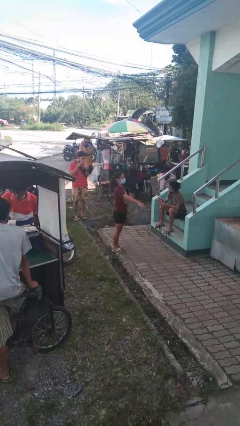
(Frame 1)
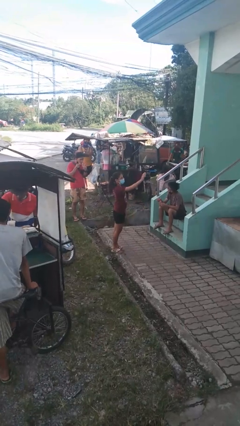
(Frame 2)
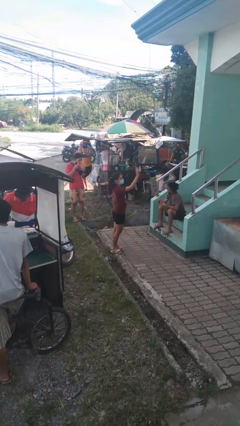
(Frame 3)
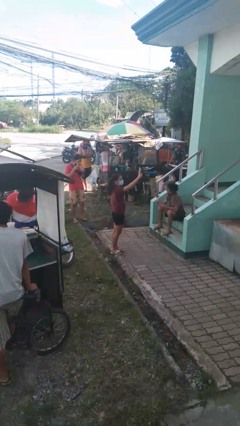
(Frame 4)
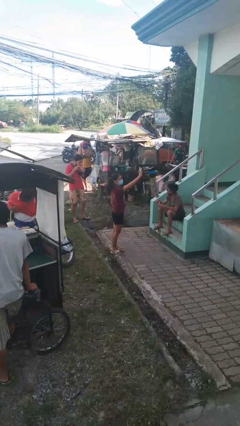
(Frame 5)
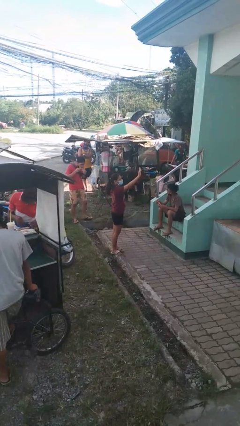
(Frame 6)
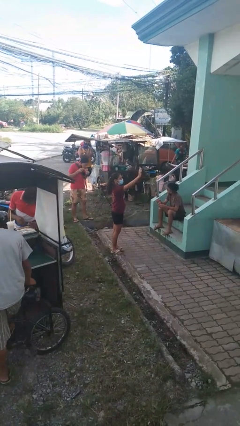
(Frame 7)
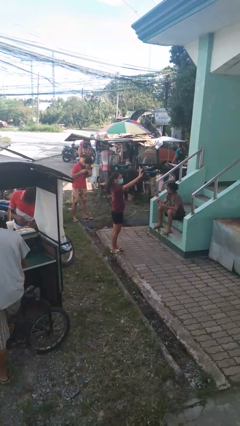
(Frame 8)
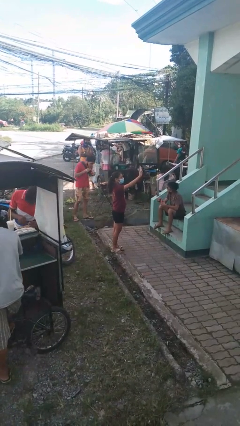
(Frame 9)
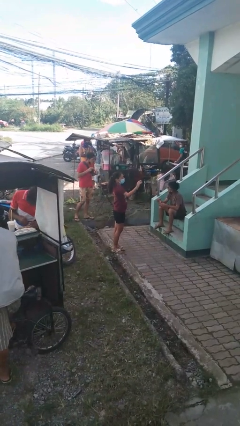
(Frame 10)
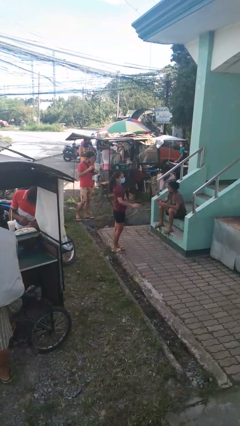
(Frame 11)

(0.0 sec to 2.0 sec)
person waves at person

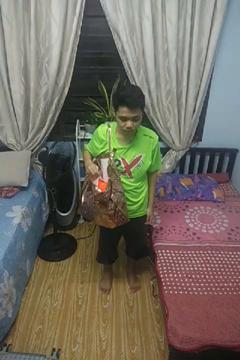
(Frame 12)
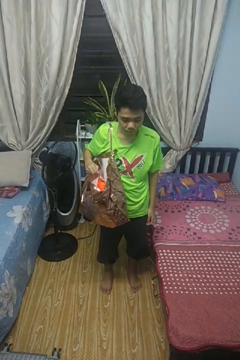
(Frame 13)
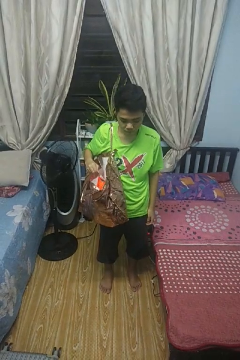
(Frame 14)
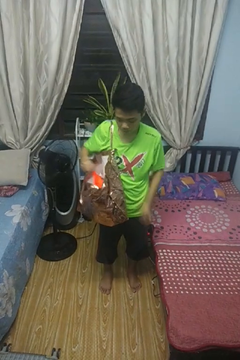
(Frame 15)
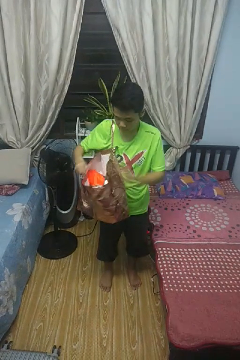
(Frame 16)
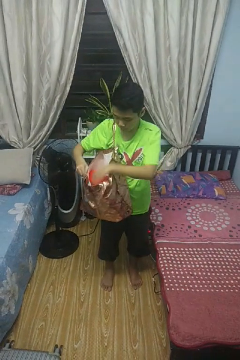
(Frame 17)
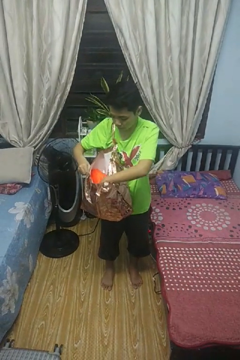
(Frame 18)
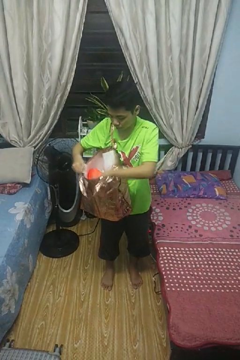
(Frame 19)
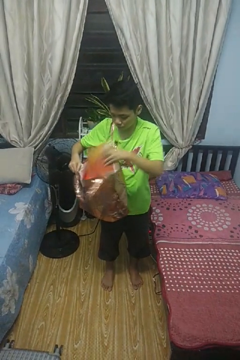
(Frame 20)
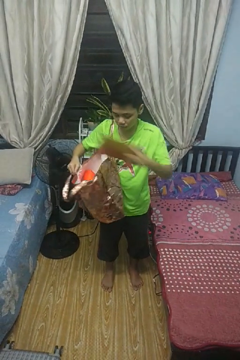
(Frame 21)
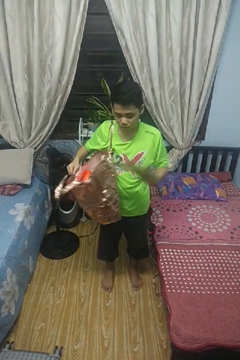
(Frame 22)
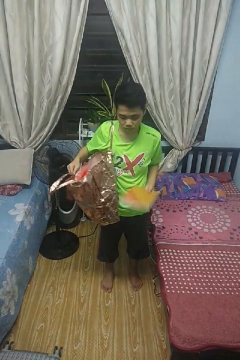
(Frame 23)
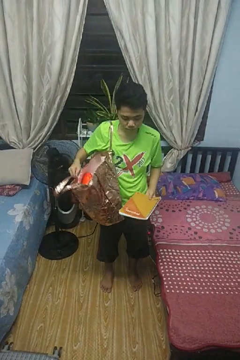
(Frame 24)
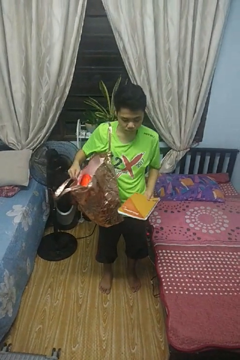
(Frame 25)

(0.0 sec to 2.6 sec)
person takes object from bag

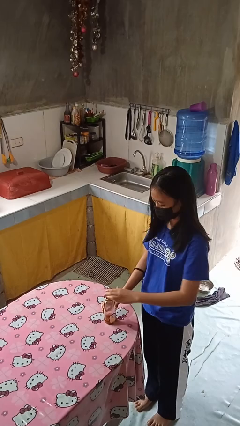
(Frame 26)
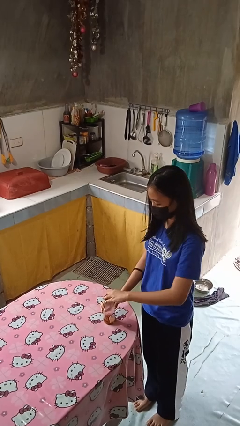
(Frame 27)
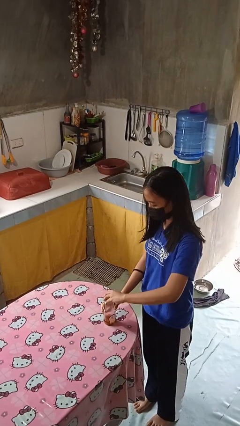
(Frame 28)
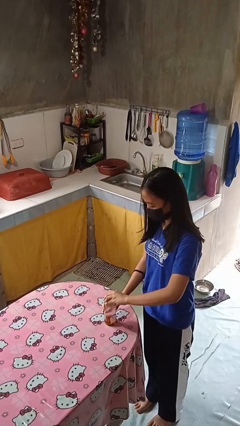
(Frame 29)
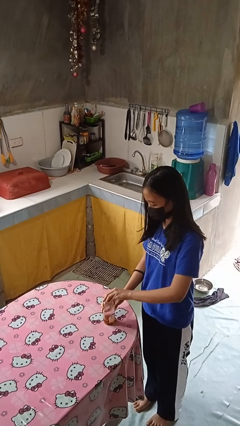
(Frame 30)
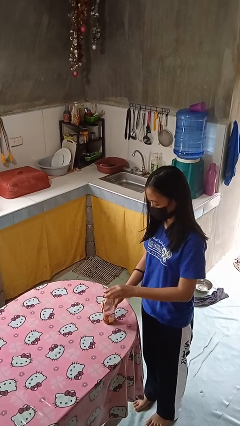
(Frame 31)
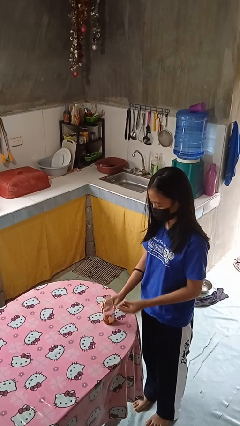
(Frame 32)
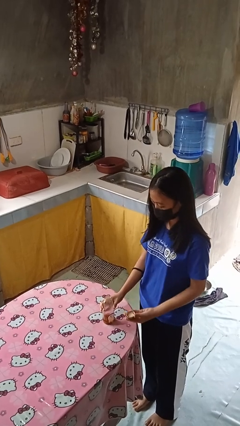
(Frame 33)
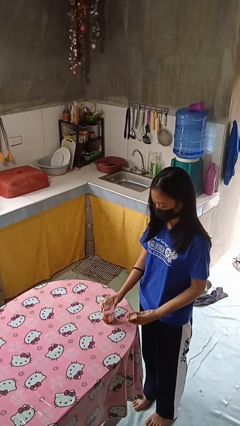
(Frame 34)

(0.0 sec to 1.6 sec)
person opens jar

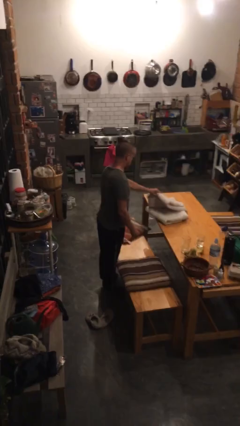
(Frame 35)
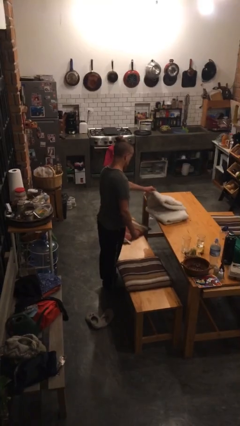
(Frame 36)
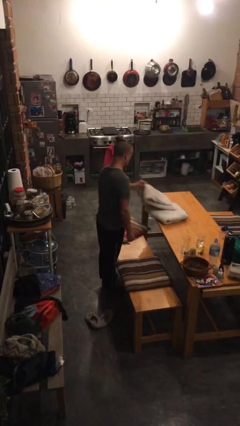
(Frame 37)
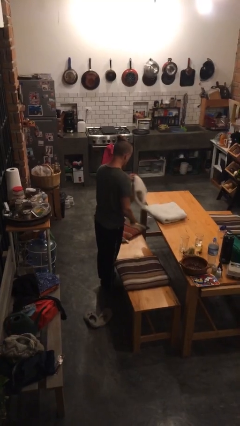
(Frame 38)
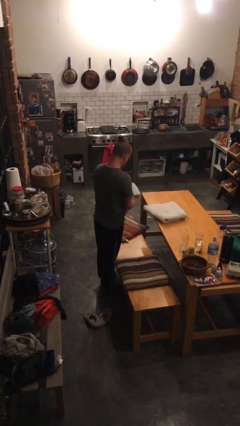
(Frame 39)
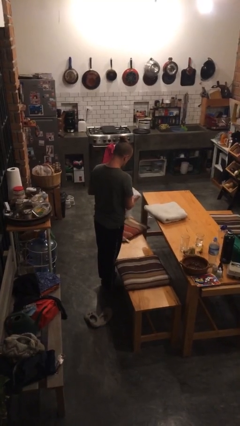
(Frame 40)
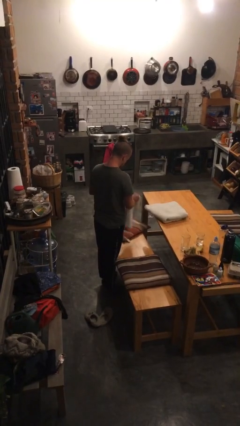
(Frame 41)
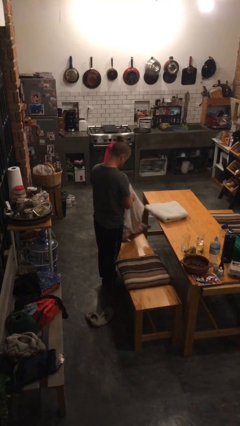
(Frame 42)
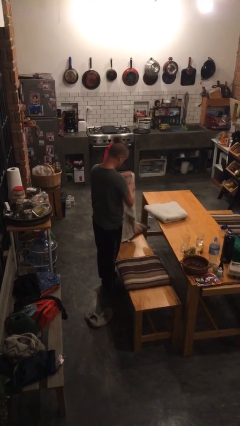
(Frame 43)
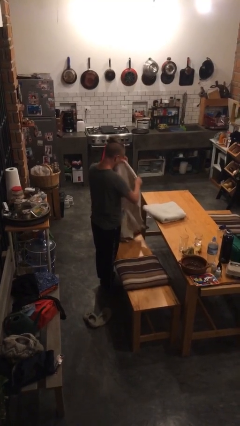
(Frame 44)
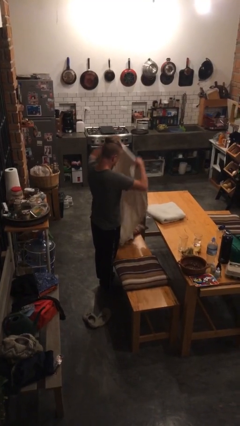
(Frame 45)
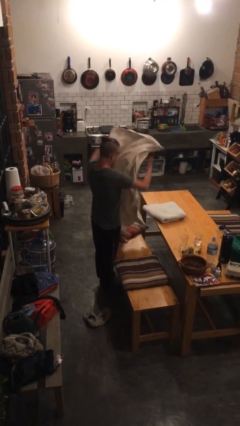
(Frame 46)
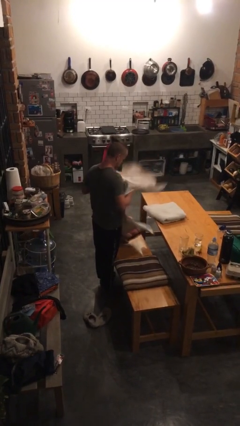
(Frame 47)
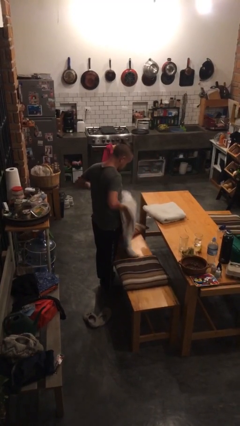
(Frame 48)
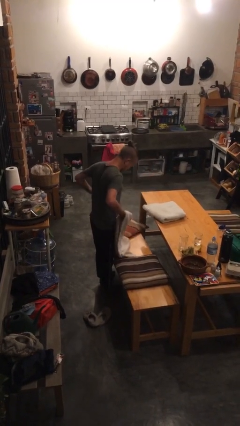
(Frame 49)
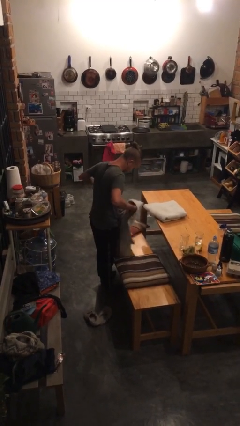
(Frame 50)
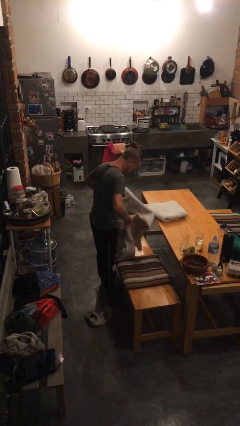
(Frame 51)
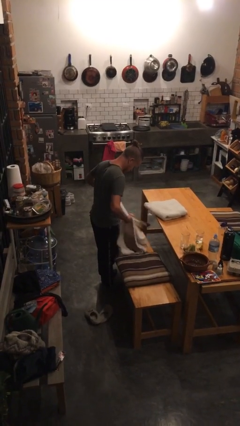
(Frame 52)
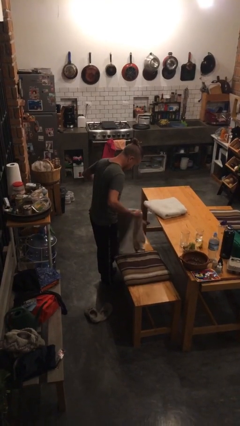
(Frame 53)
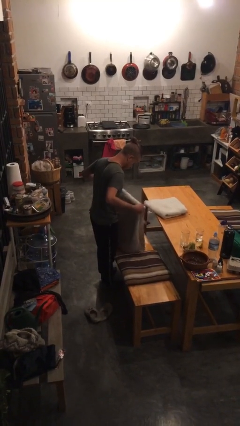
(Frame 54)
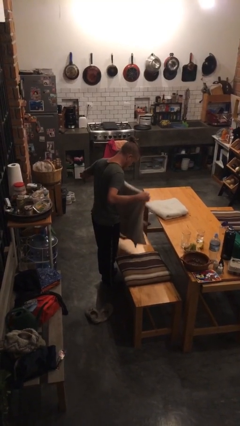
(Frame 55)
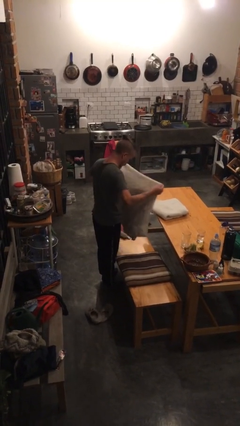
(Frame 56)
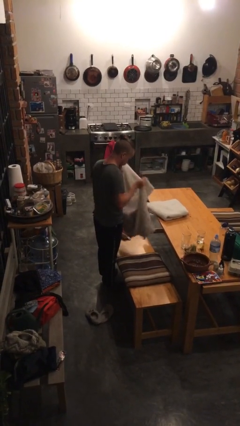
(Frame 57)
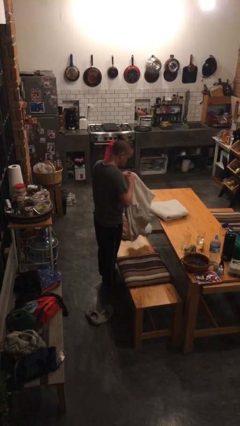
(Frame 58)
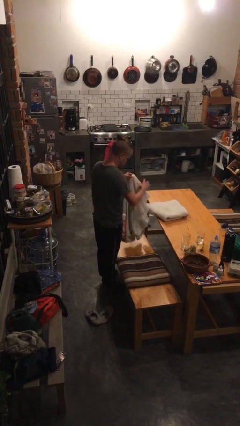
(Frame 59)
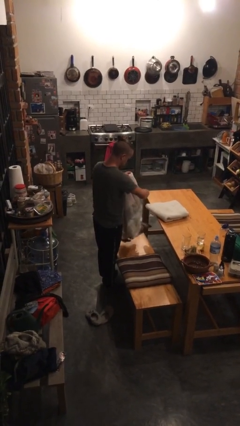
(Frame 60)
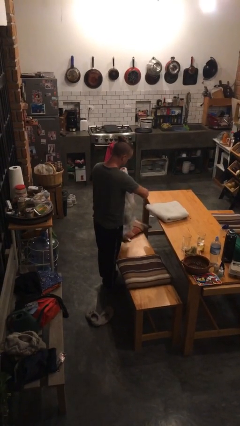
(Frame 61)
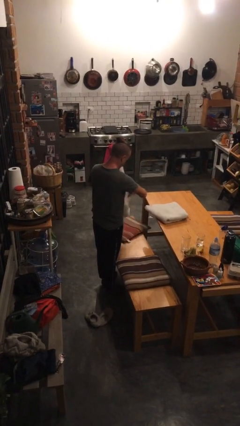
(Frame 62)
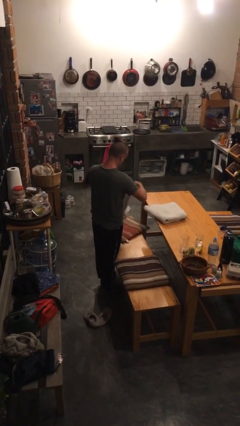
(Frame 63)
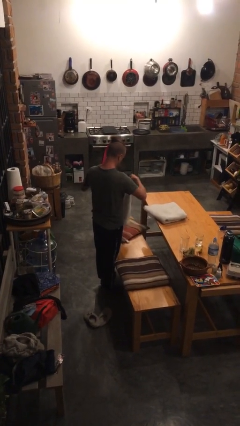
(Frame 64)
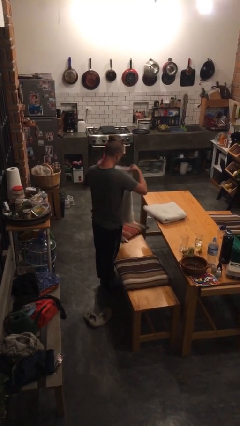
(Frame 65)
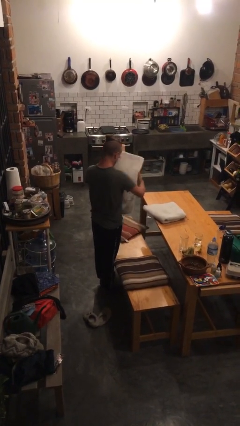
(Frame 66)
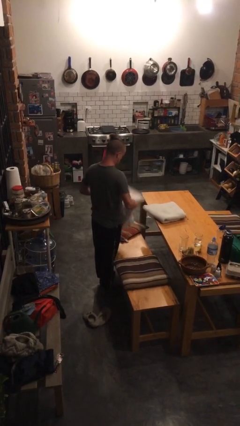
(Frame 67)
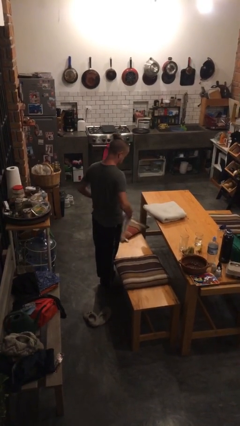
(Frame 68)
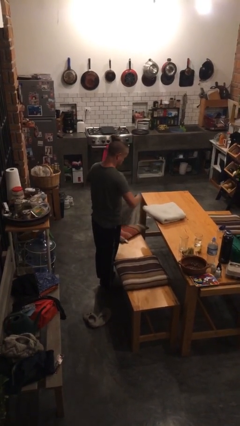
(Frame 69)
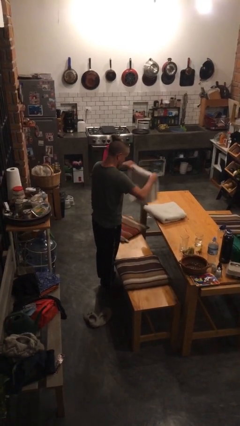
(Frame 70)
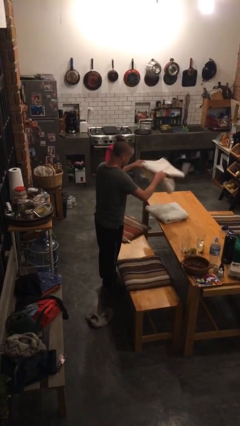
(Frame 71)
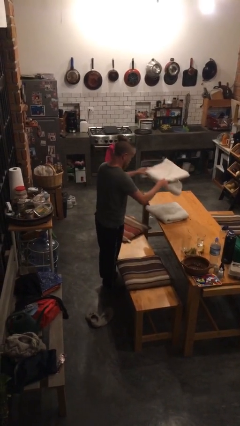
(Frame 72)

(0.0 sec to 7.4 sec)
person folds towel

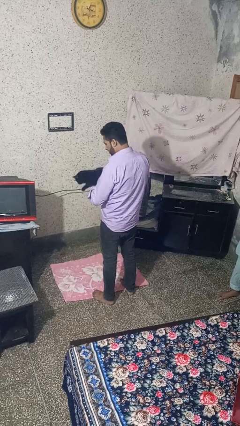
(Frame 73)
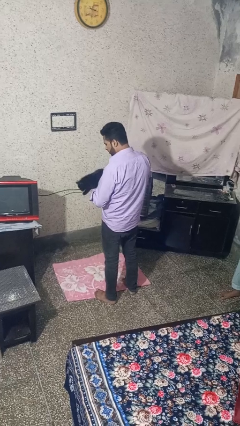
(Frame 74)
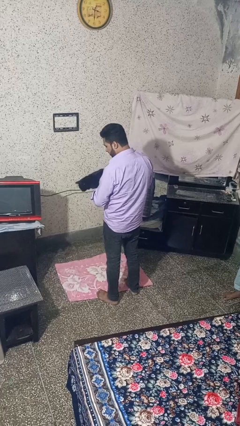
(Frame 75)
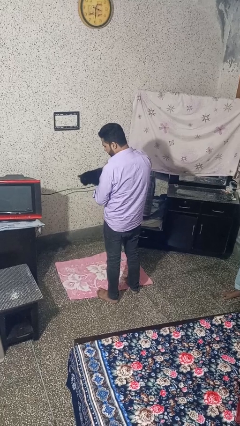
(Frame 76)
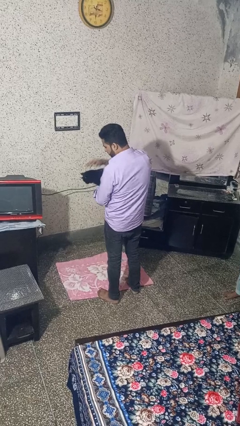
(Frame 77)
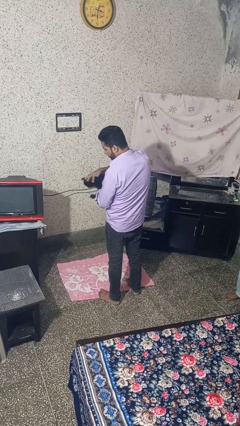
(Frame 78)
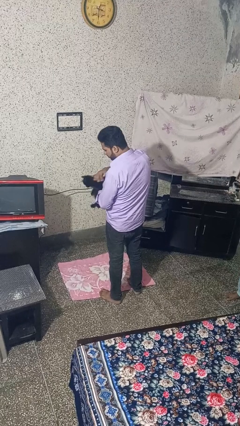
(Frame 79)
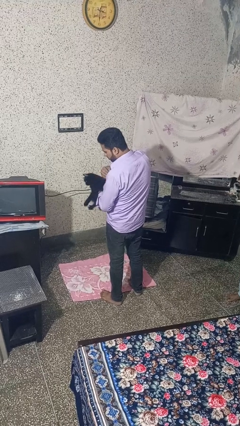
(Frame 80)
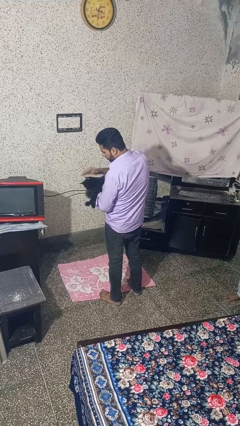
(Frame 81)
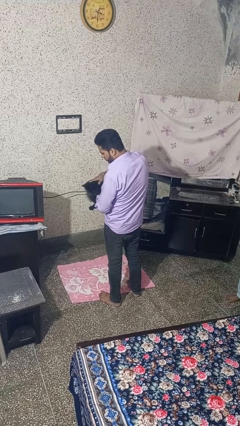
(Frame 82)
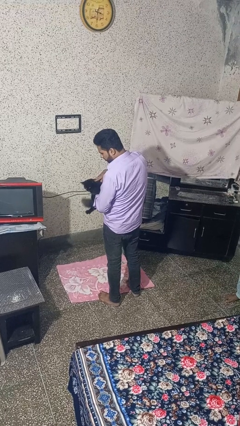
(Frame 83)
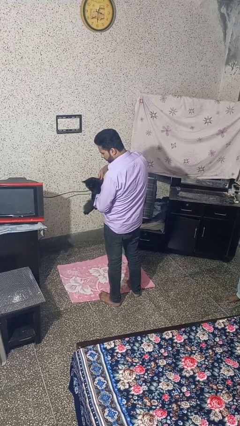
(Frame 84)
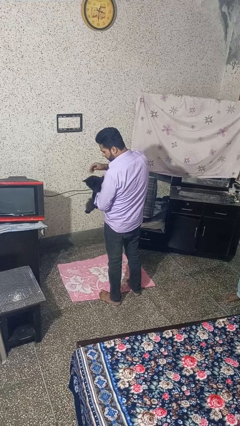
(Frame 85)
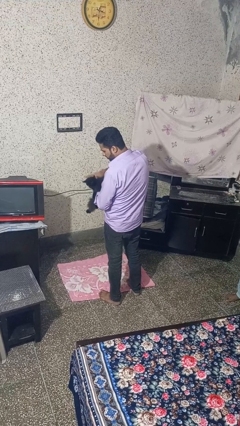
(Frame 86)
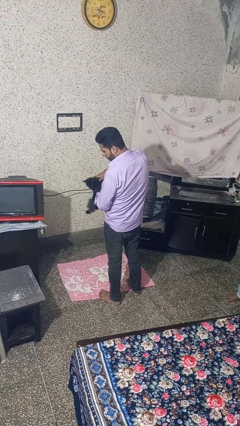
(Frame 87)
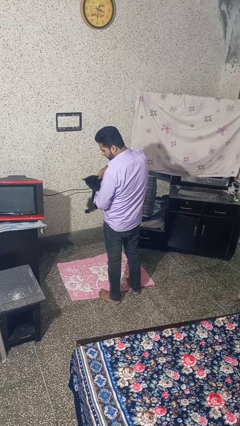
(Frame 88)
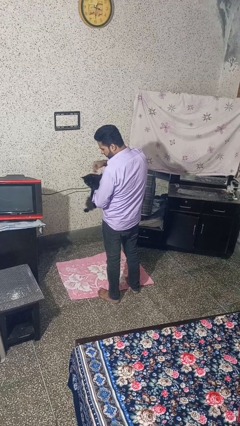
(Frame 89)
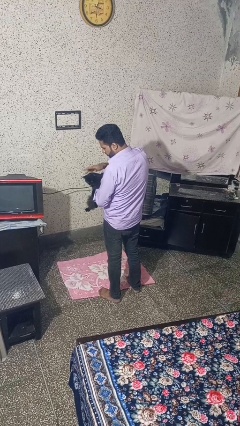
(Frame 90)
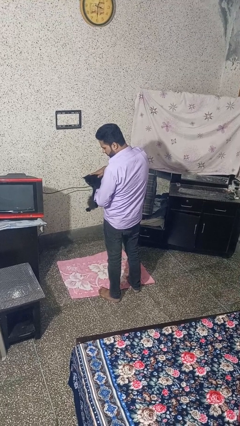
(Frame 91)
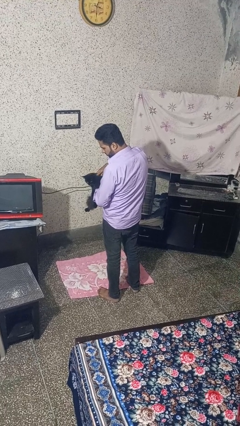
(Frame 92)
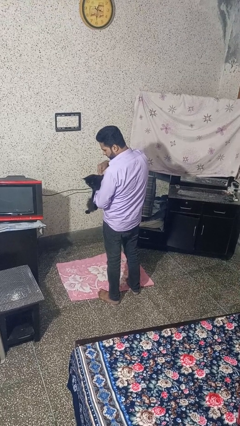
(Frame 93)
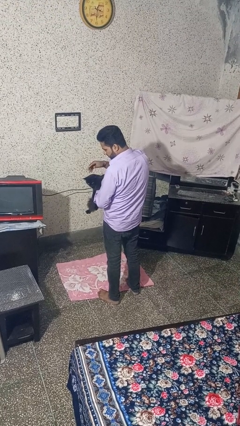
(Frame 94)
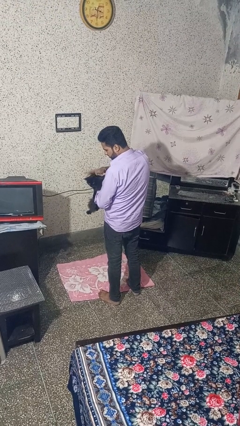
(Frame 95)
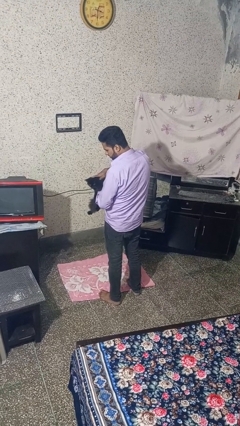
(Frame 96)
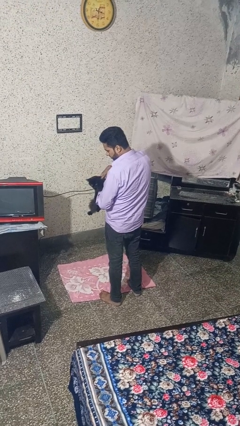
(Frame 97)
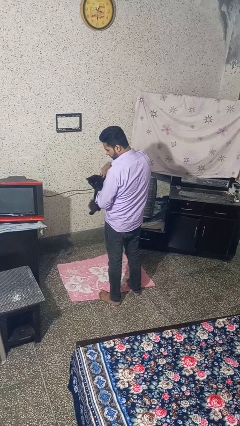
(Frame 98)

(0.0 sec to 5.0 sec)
person pets cat
